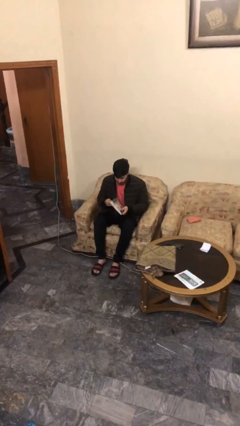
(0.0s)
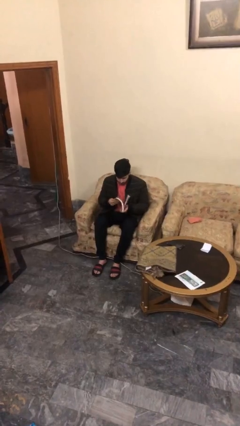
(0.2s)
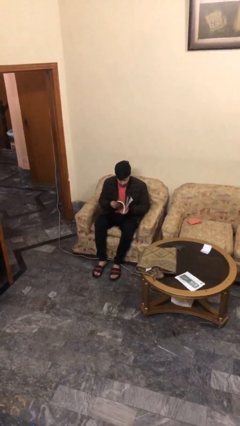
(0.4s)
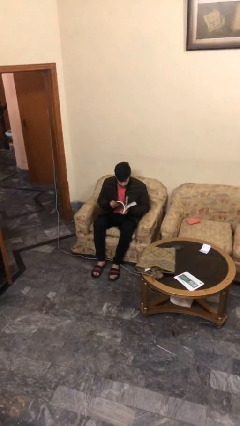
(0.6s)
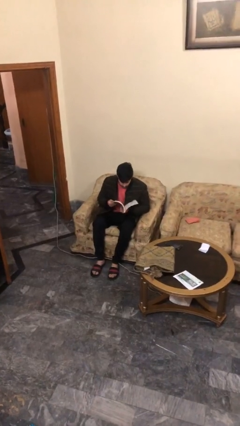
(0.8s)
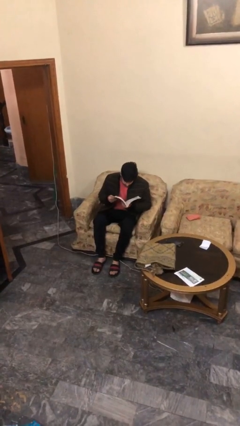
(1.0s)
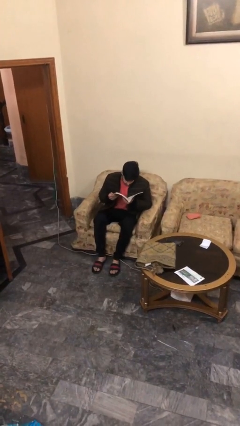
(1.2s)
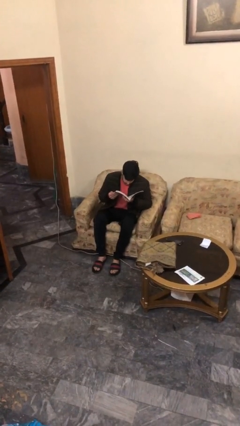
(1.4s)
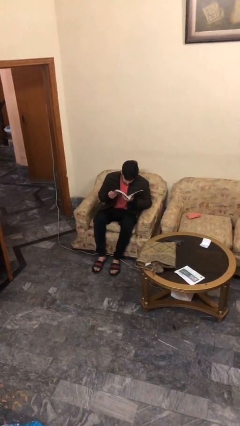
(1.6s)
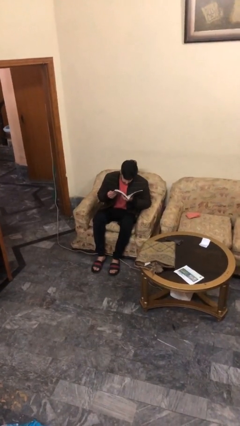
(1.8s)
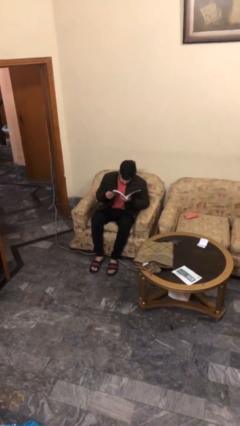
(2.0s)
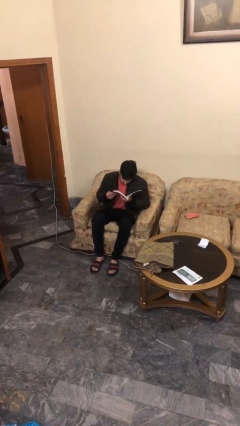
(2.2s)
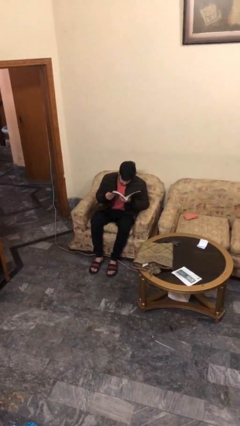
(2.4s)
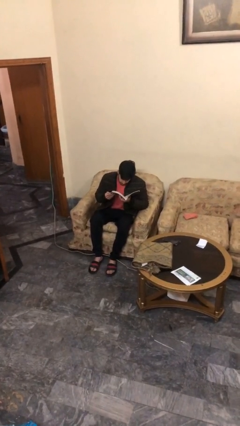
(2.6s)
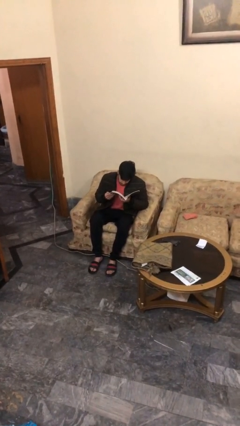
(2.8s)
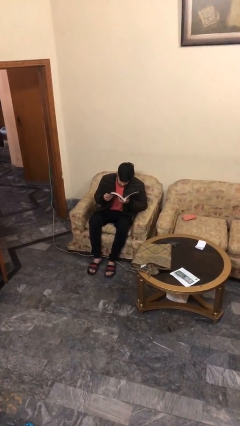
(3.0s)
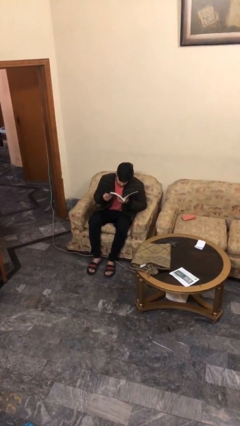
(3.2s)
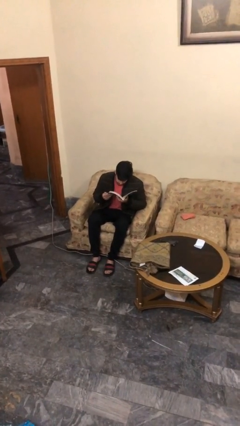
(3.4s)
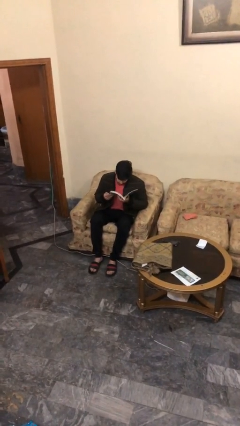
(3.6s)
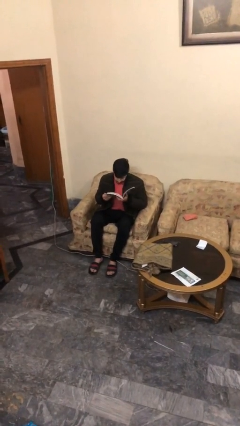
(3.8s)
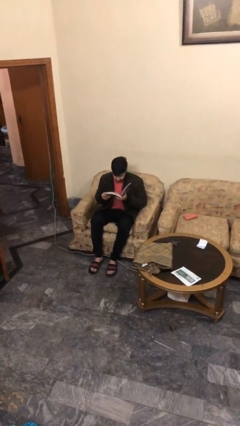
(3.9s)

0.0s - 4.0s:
person reads document

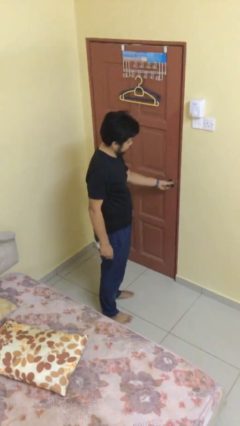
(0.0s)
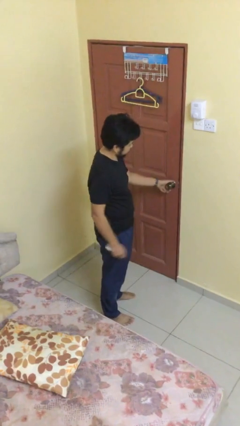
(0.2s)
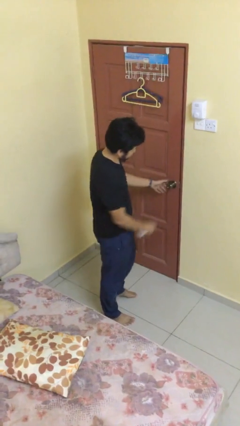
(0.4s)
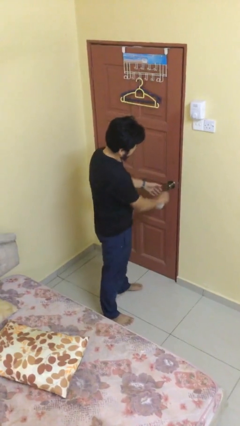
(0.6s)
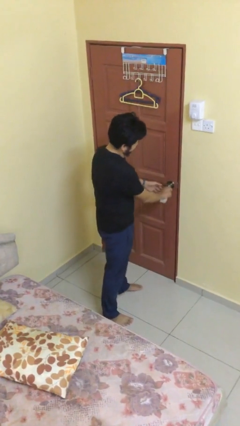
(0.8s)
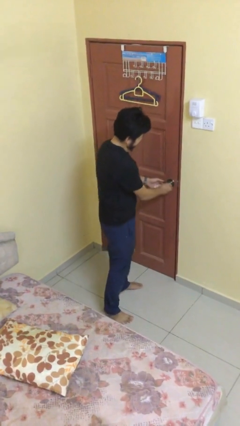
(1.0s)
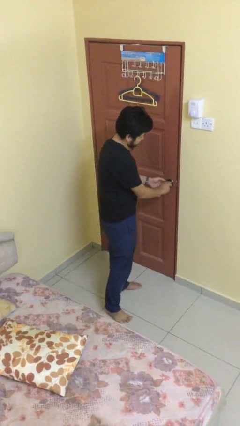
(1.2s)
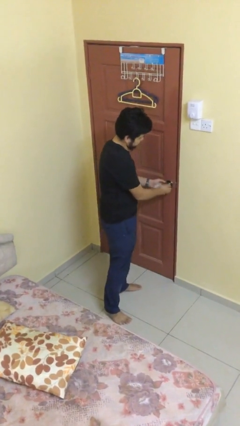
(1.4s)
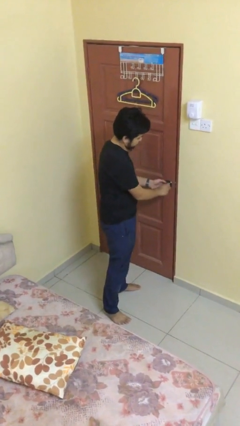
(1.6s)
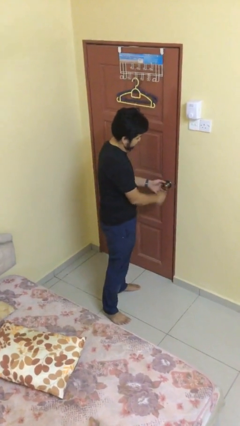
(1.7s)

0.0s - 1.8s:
person locks door with keys

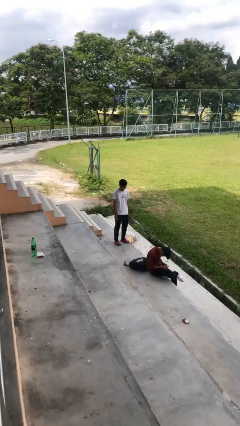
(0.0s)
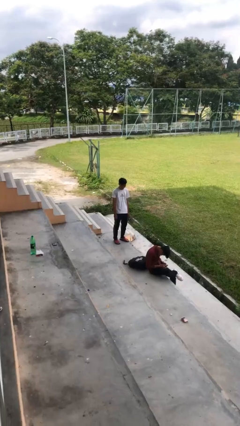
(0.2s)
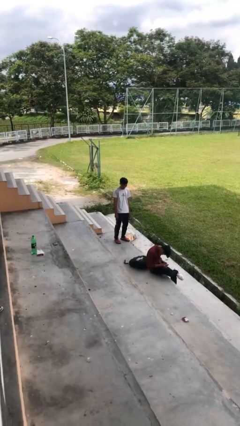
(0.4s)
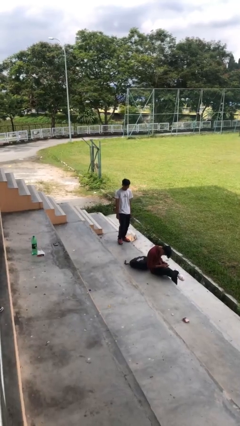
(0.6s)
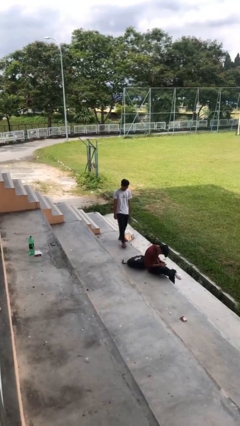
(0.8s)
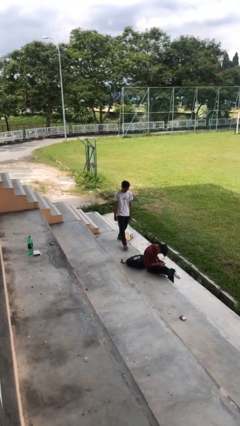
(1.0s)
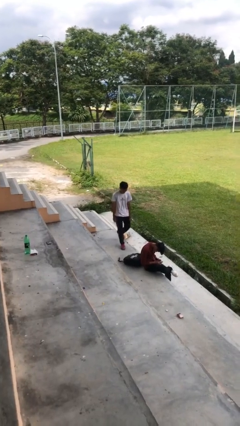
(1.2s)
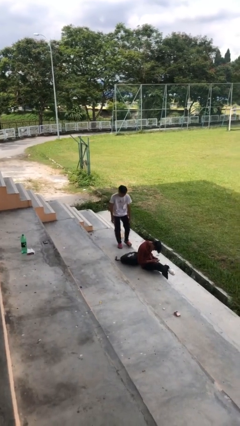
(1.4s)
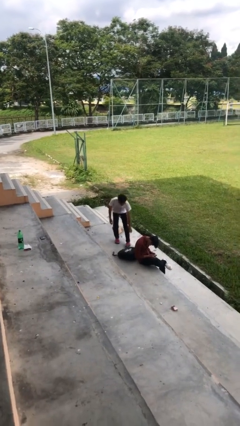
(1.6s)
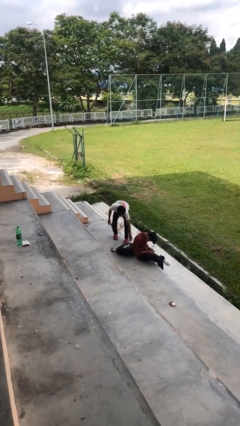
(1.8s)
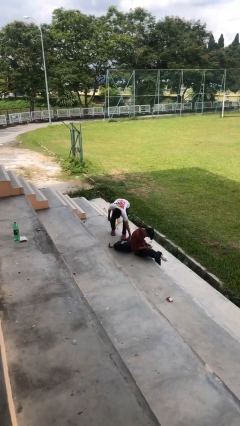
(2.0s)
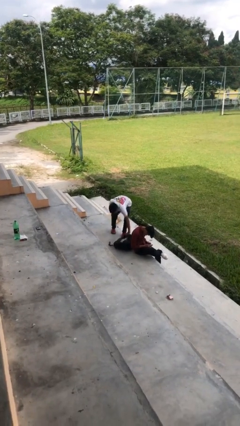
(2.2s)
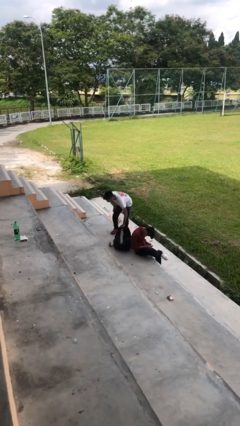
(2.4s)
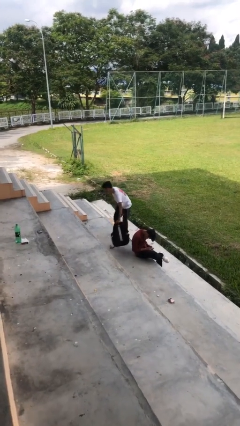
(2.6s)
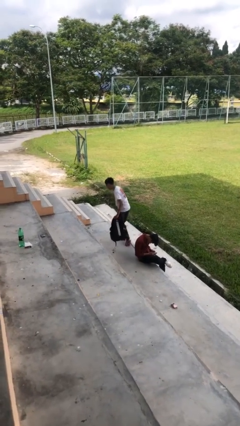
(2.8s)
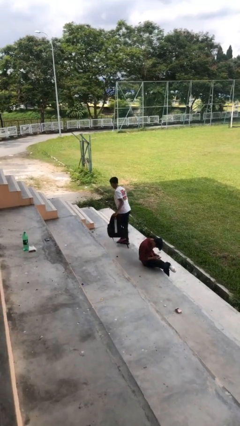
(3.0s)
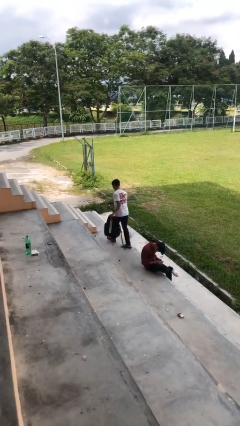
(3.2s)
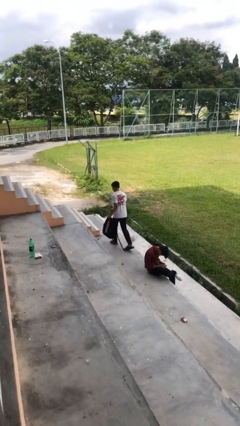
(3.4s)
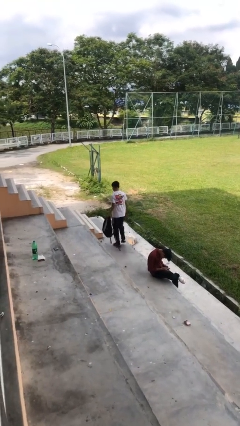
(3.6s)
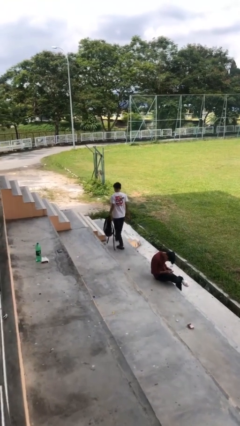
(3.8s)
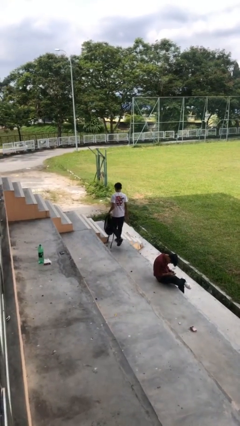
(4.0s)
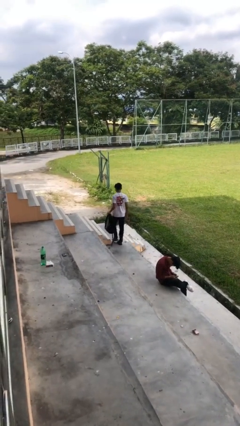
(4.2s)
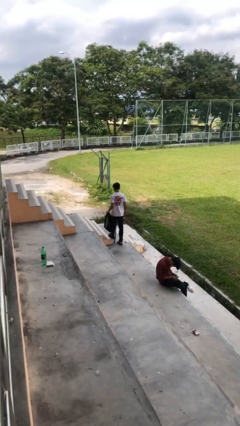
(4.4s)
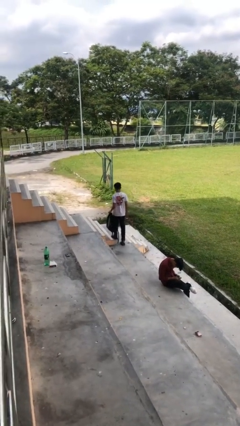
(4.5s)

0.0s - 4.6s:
person steals object from person

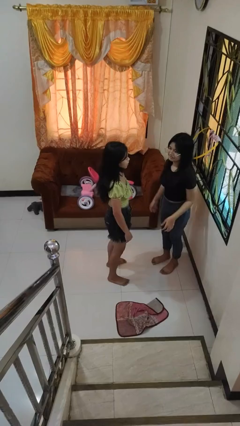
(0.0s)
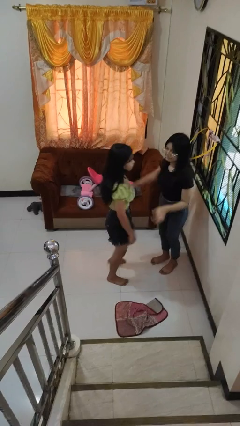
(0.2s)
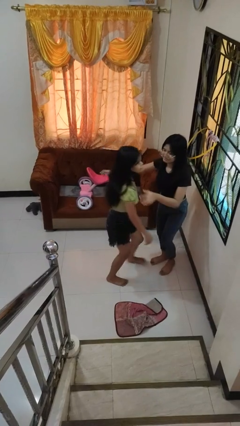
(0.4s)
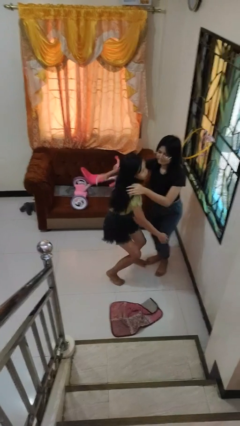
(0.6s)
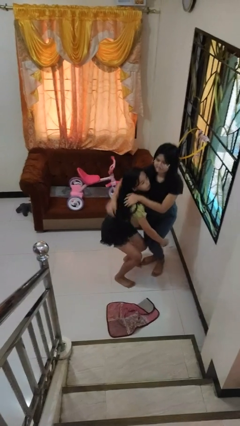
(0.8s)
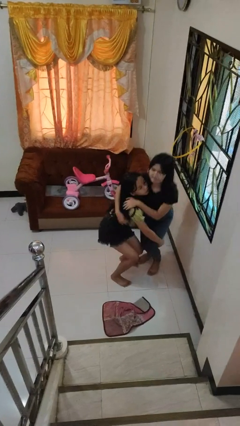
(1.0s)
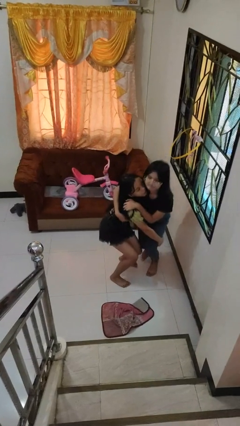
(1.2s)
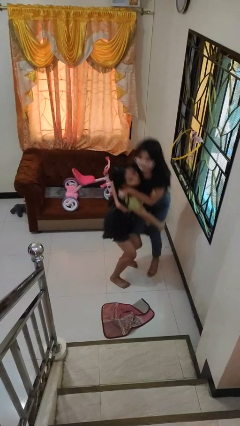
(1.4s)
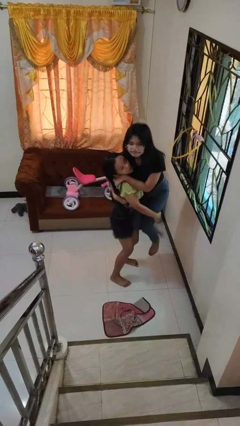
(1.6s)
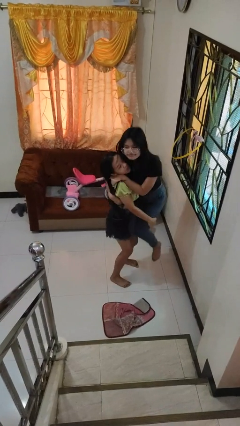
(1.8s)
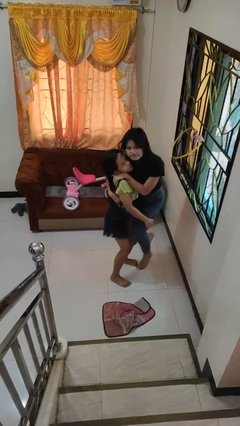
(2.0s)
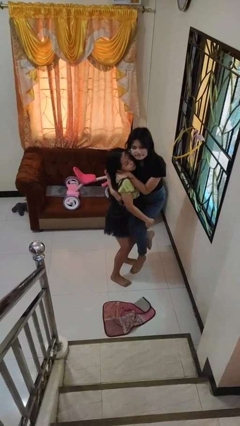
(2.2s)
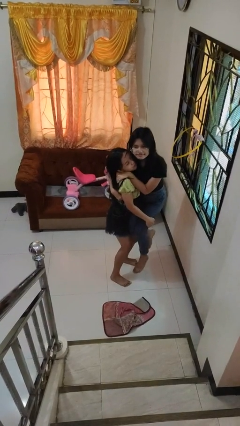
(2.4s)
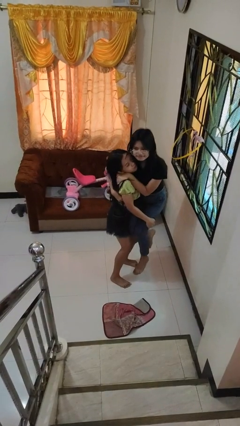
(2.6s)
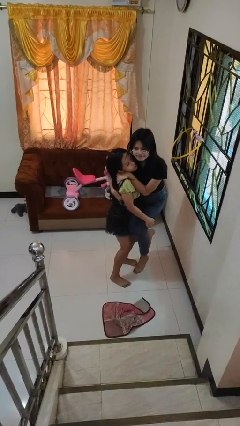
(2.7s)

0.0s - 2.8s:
person picks up person

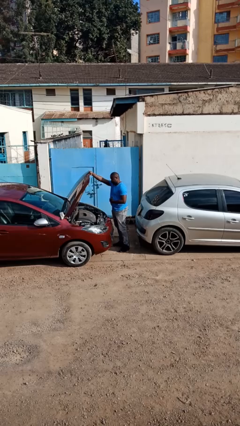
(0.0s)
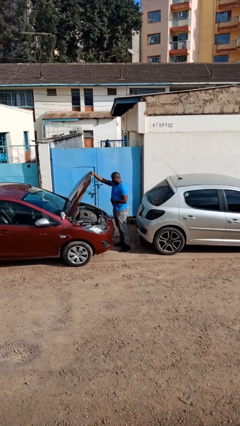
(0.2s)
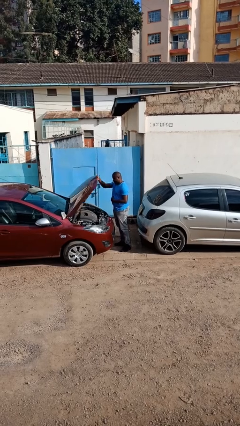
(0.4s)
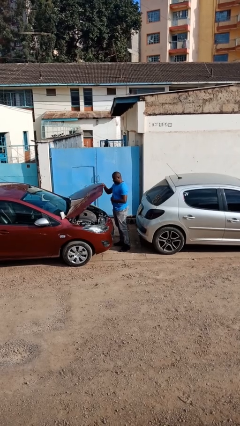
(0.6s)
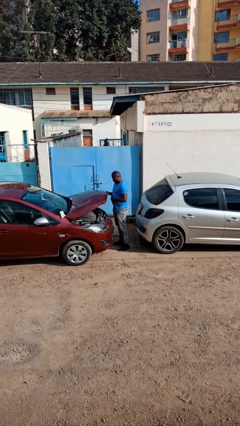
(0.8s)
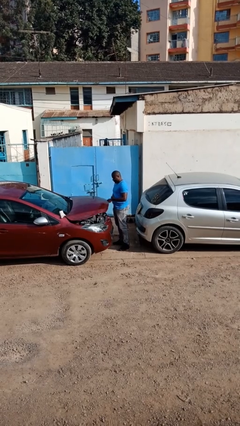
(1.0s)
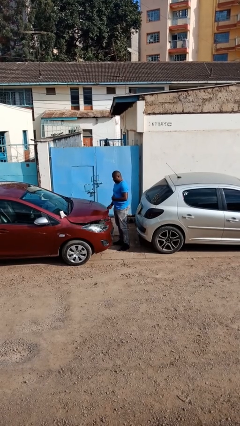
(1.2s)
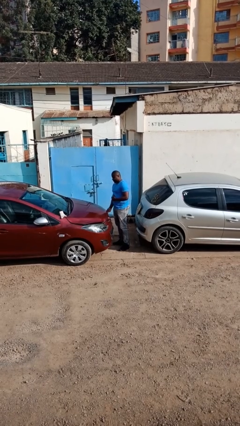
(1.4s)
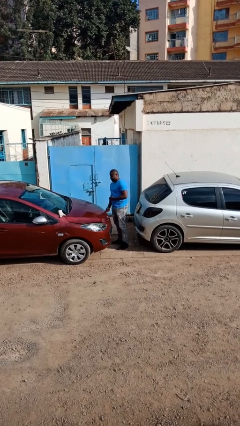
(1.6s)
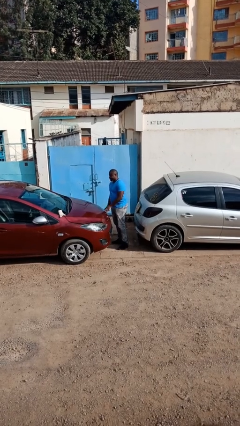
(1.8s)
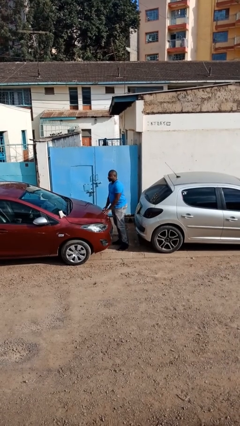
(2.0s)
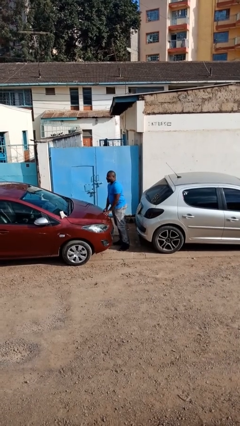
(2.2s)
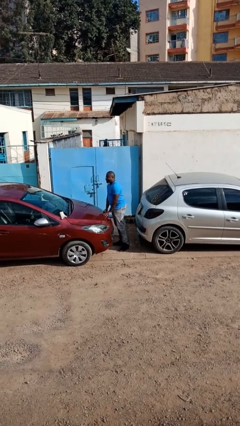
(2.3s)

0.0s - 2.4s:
person closes car hood

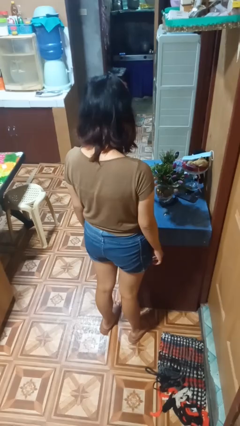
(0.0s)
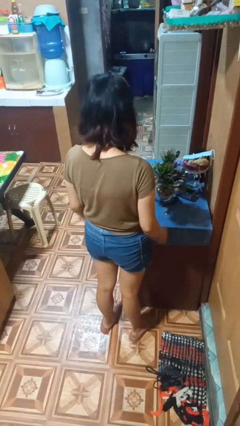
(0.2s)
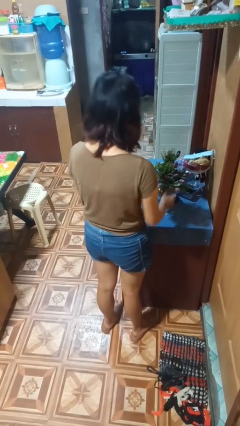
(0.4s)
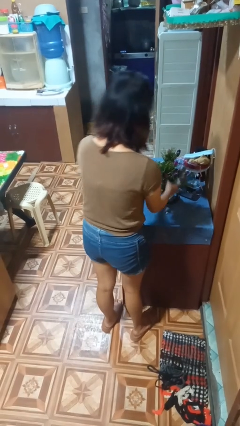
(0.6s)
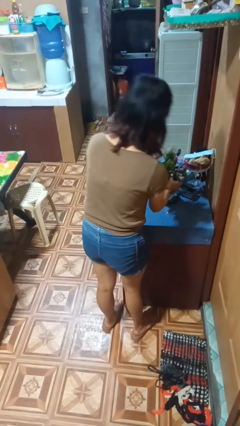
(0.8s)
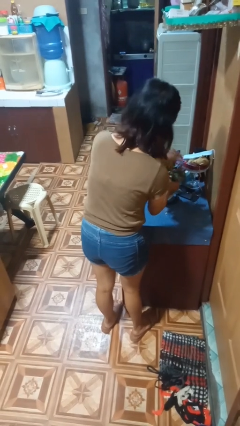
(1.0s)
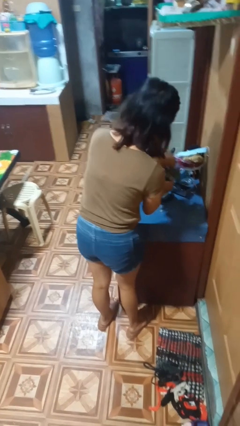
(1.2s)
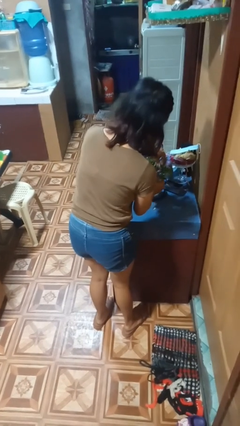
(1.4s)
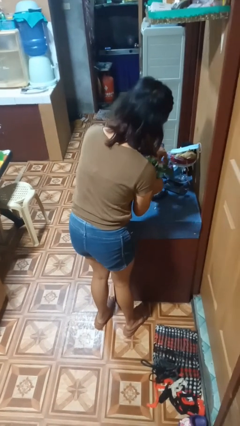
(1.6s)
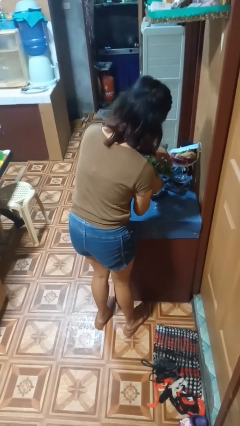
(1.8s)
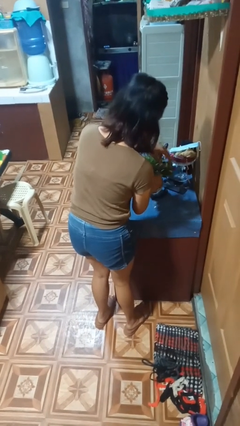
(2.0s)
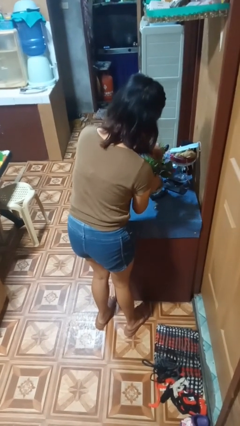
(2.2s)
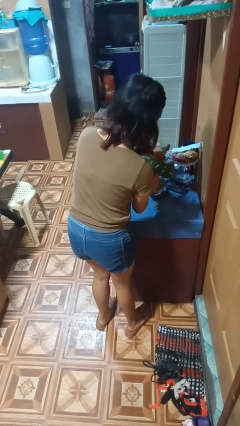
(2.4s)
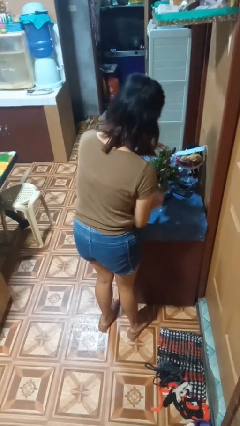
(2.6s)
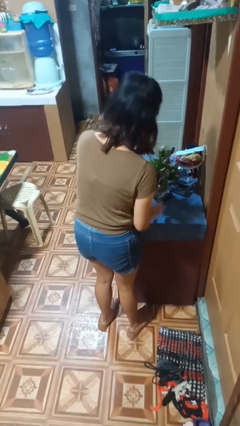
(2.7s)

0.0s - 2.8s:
person arranges flowers in vase
